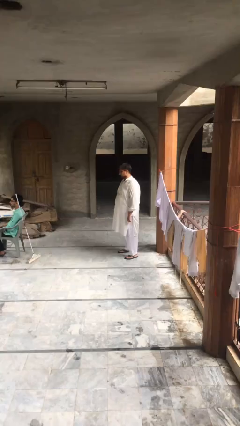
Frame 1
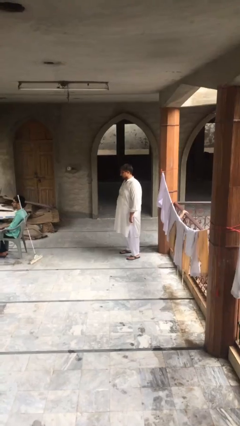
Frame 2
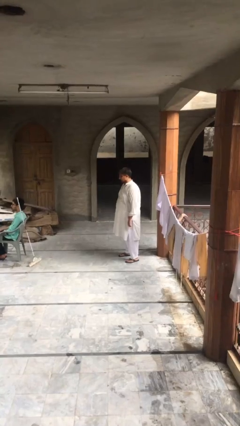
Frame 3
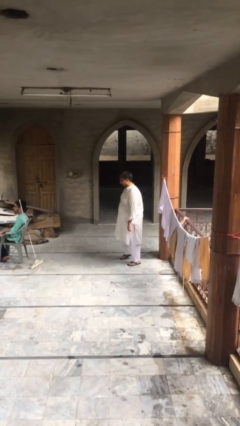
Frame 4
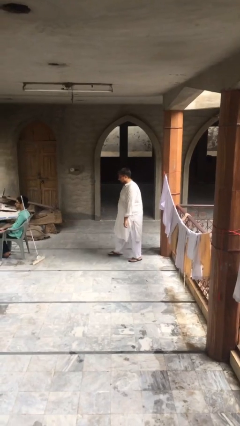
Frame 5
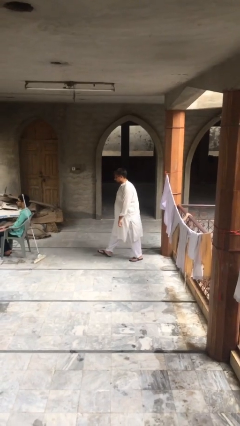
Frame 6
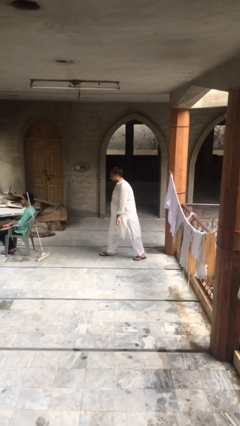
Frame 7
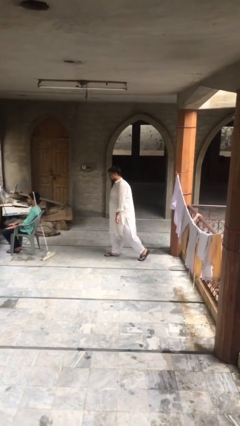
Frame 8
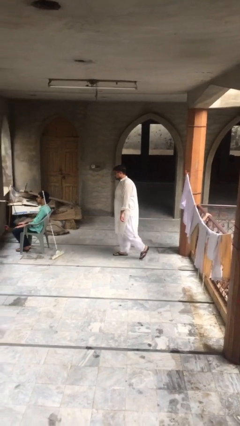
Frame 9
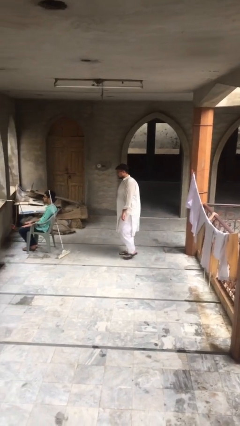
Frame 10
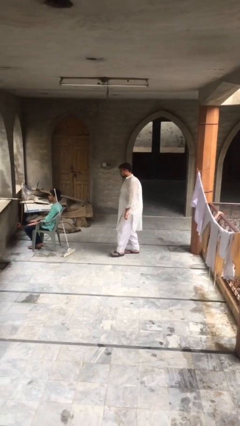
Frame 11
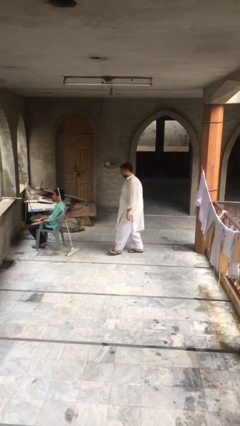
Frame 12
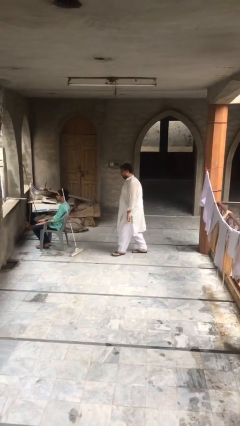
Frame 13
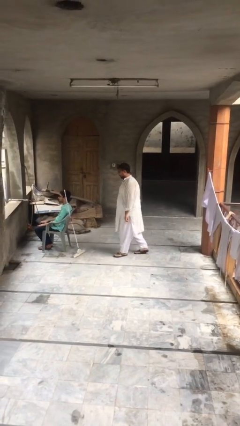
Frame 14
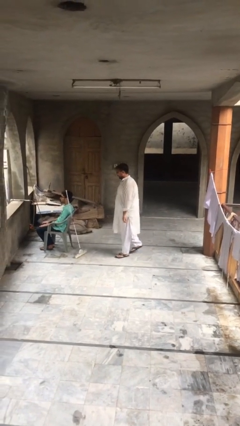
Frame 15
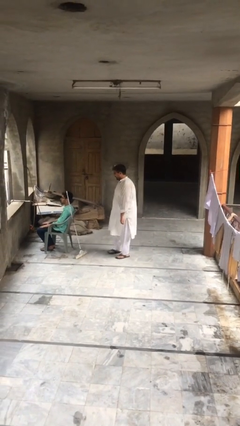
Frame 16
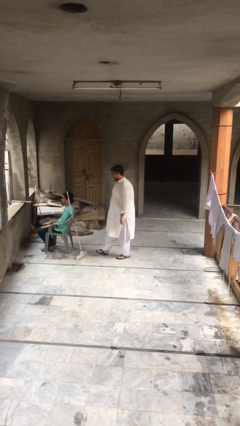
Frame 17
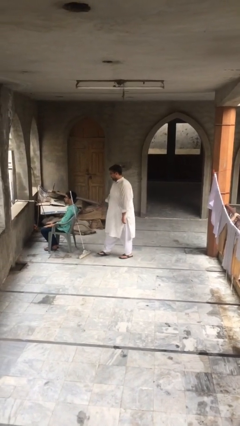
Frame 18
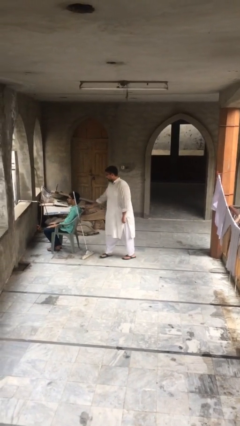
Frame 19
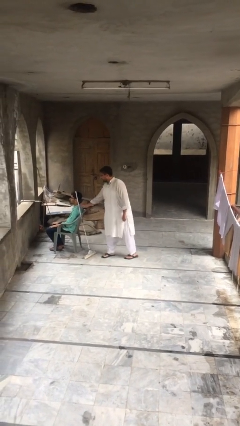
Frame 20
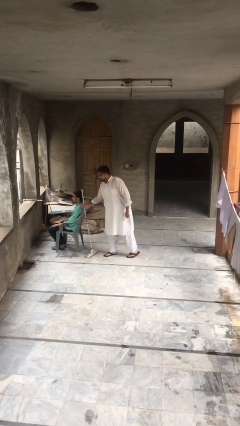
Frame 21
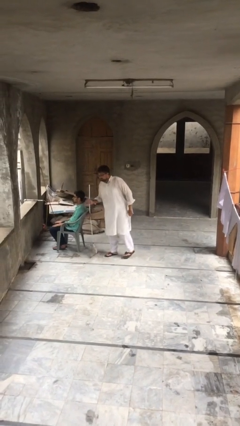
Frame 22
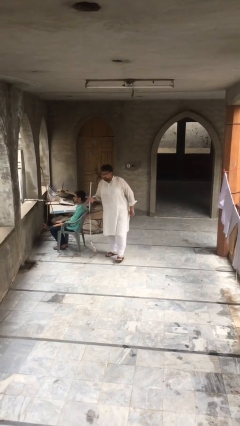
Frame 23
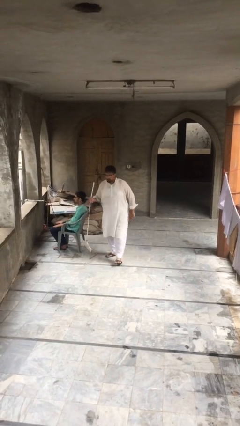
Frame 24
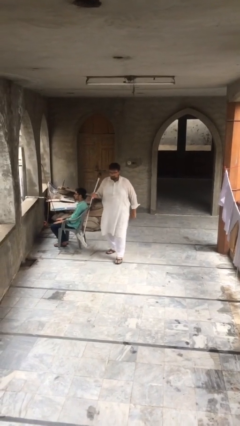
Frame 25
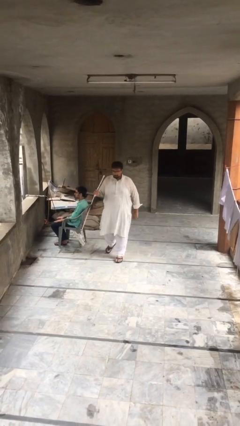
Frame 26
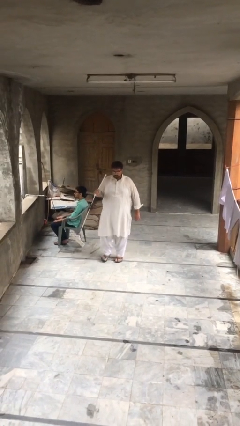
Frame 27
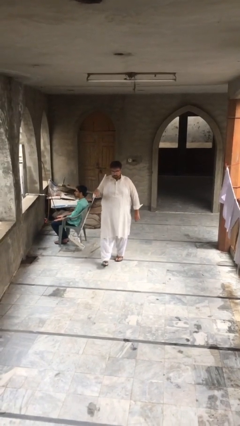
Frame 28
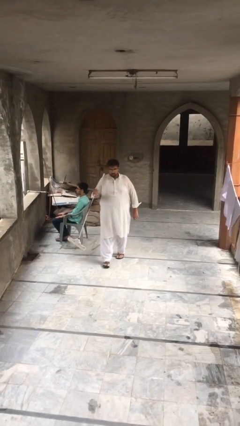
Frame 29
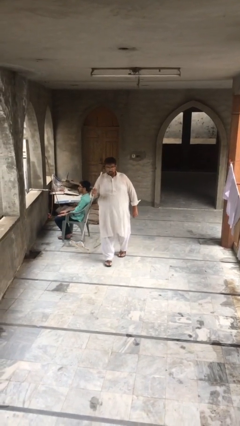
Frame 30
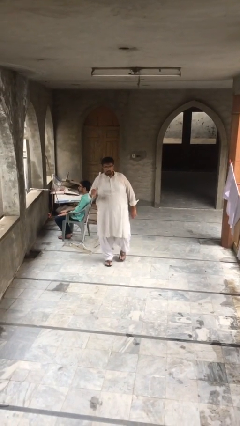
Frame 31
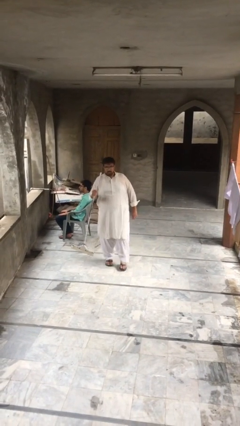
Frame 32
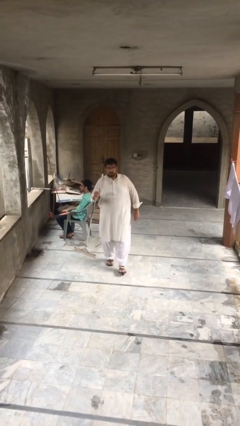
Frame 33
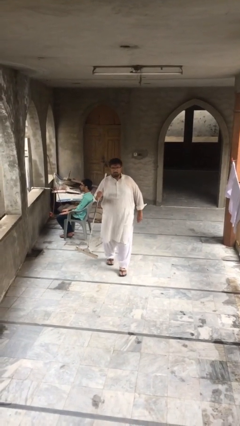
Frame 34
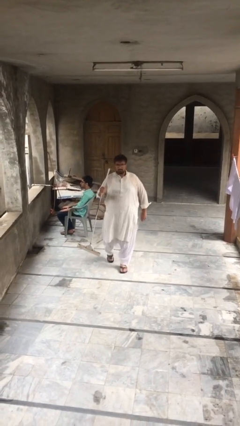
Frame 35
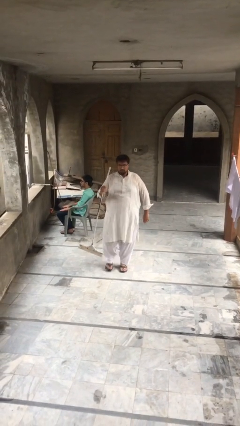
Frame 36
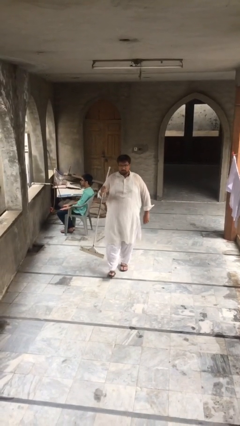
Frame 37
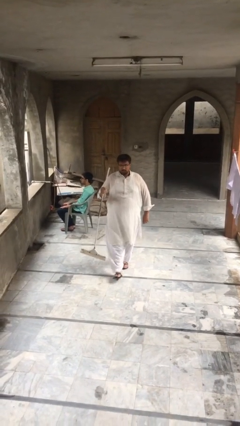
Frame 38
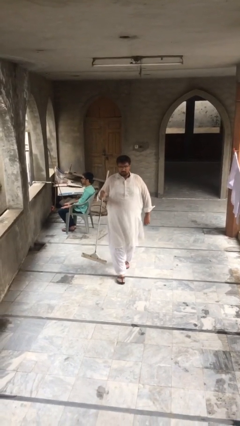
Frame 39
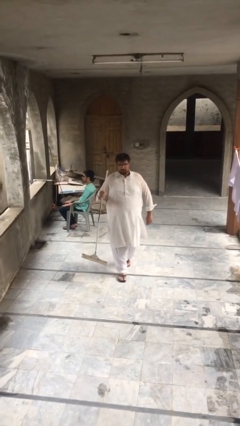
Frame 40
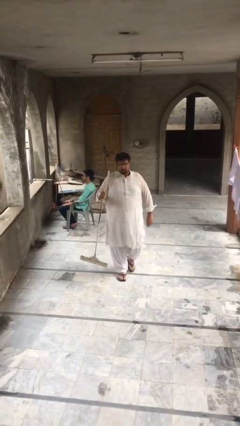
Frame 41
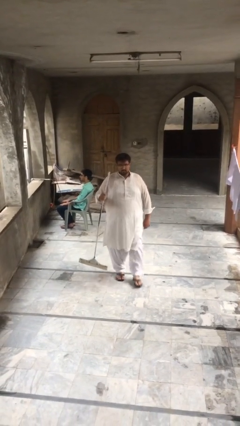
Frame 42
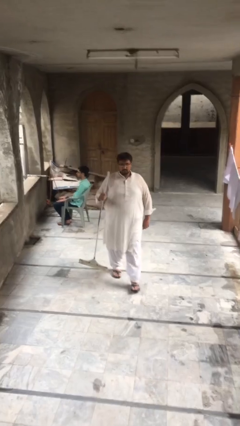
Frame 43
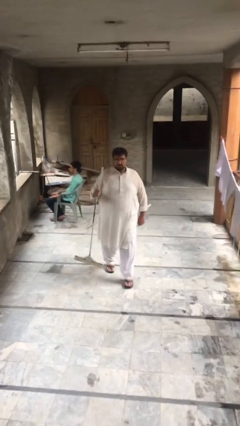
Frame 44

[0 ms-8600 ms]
person steals object from person

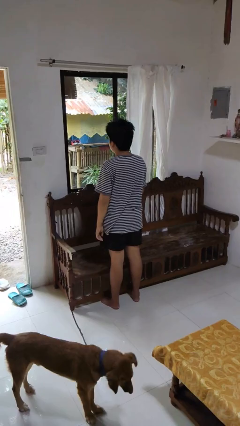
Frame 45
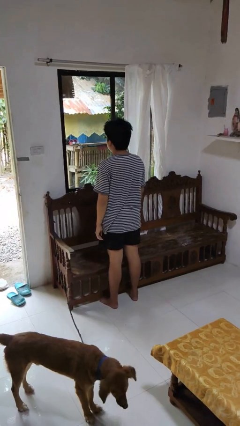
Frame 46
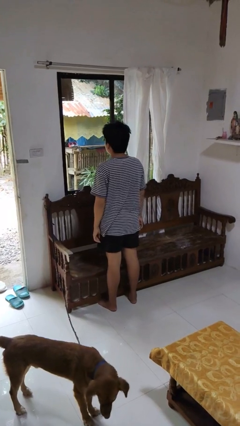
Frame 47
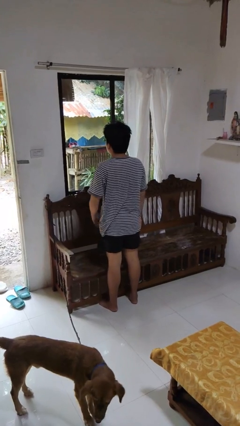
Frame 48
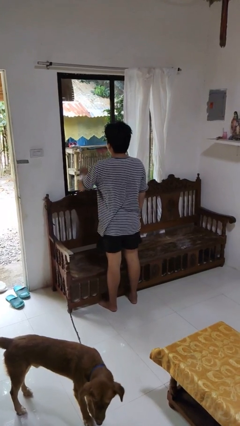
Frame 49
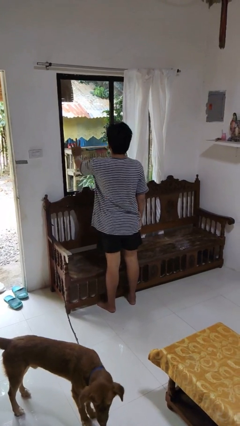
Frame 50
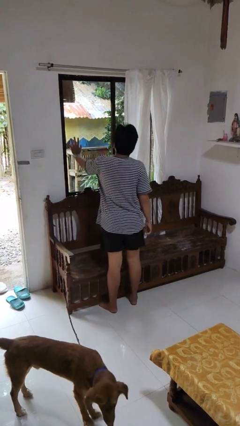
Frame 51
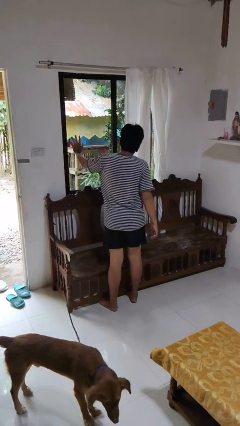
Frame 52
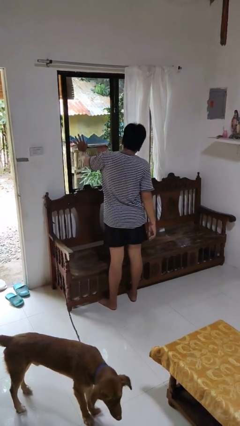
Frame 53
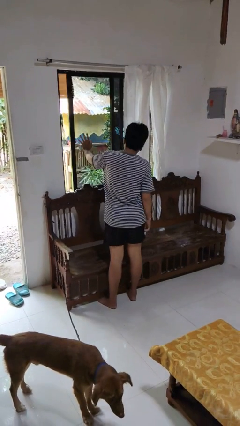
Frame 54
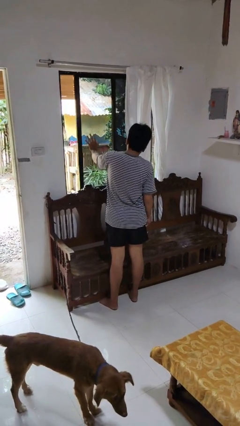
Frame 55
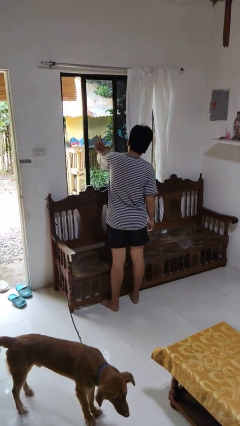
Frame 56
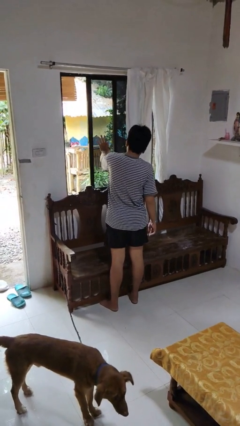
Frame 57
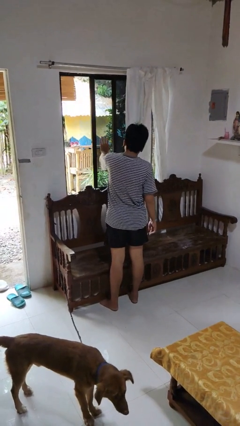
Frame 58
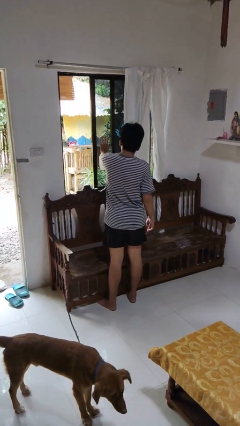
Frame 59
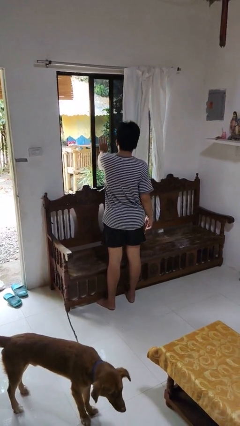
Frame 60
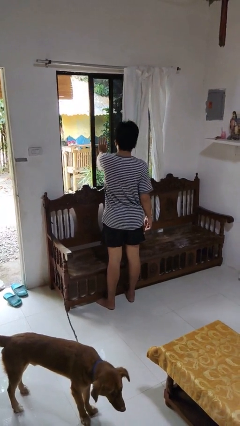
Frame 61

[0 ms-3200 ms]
person opens home window

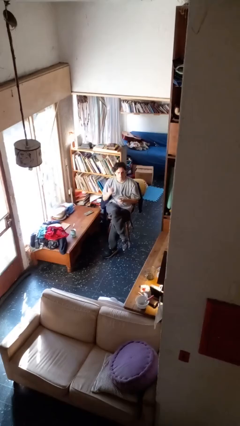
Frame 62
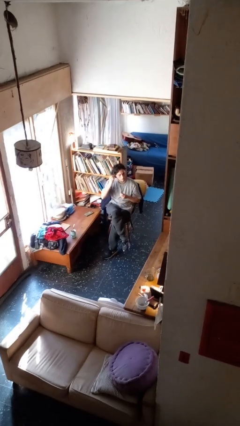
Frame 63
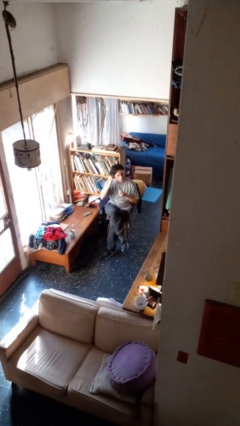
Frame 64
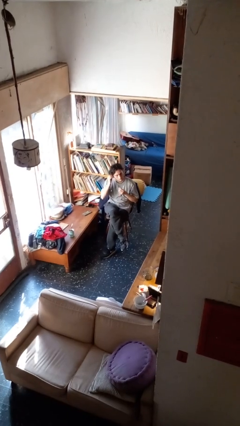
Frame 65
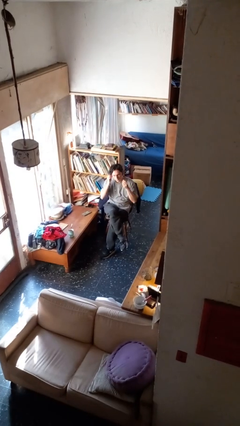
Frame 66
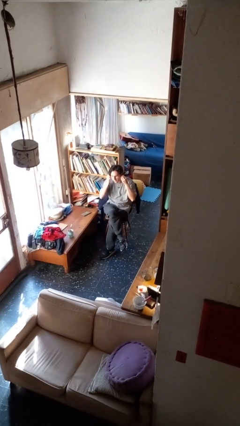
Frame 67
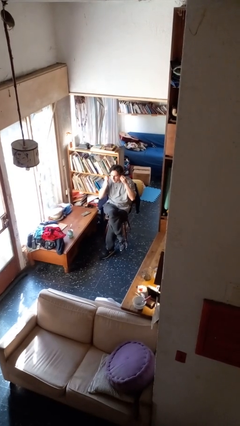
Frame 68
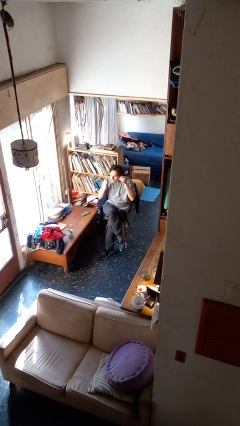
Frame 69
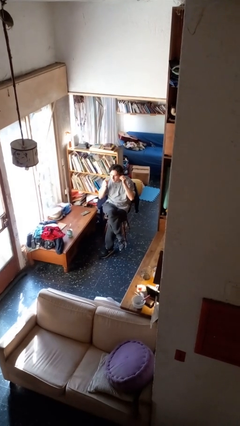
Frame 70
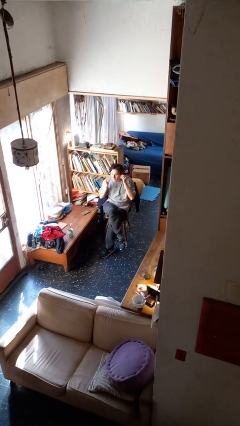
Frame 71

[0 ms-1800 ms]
person puts on headphones

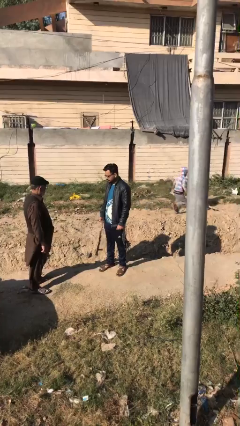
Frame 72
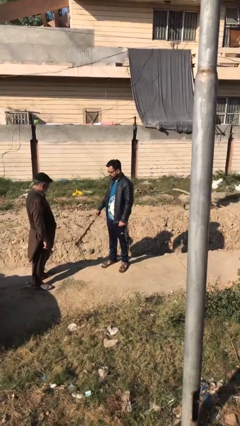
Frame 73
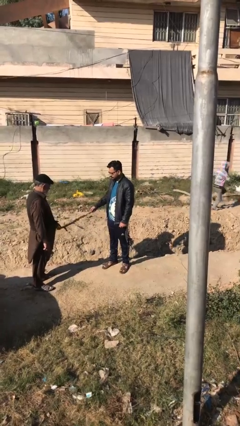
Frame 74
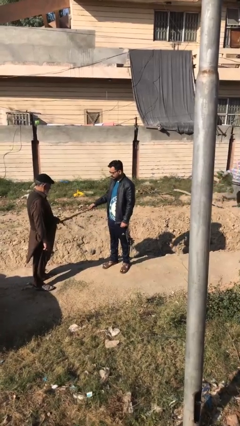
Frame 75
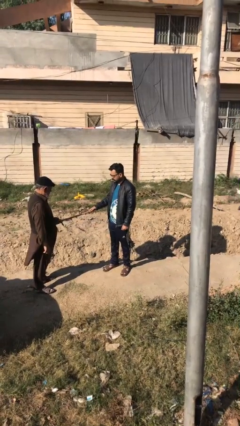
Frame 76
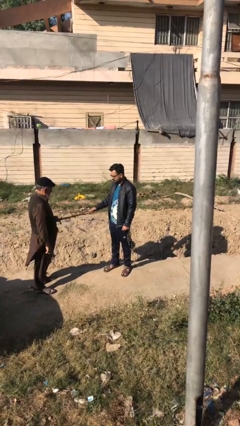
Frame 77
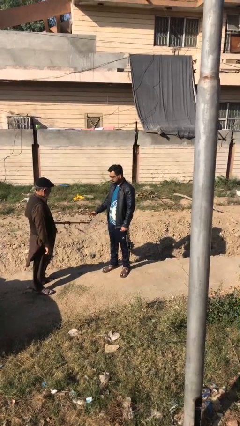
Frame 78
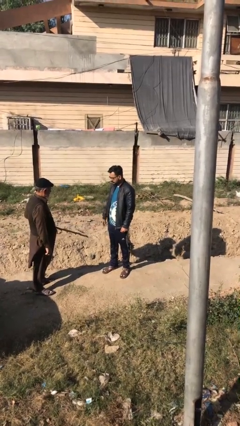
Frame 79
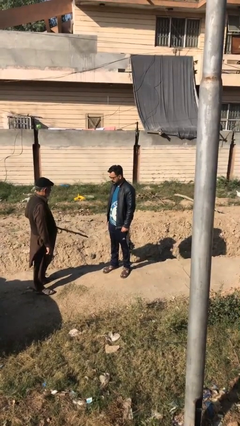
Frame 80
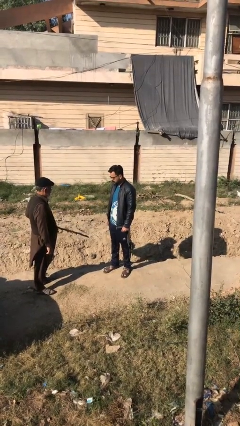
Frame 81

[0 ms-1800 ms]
person transfers object to person

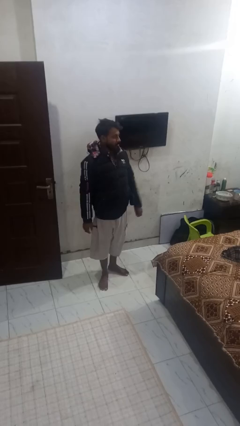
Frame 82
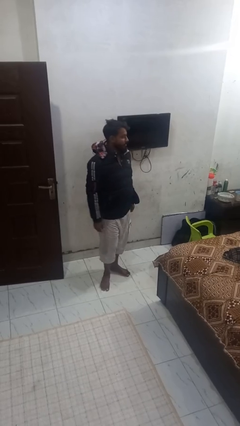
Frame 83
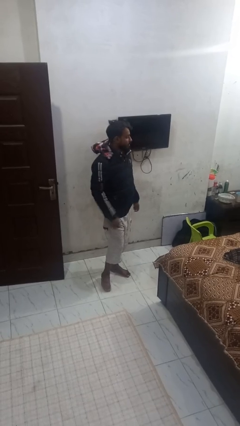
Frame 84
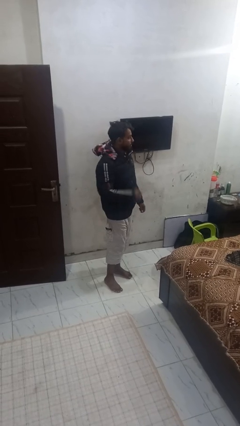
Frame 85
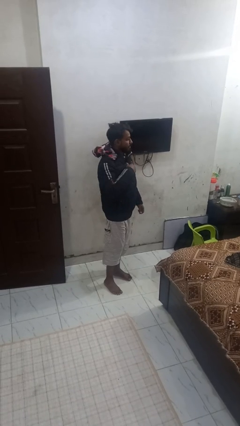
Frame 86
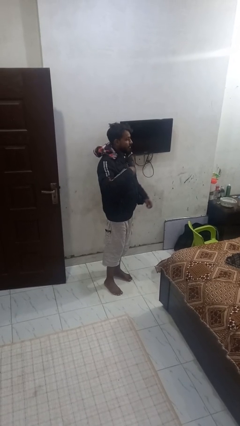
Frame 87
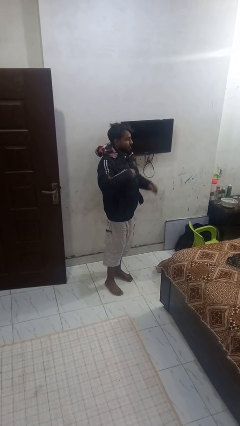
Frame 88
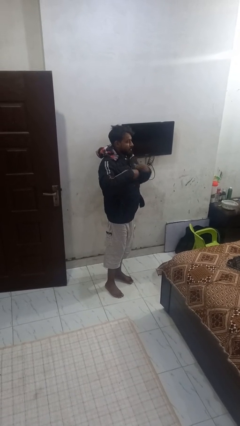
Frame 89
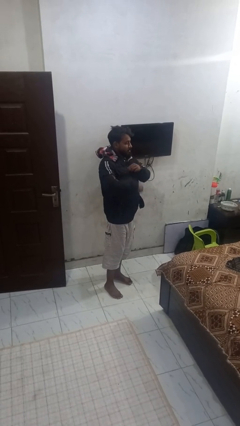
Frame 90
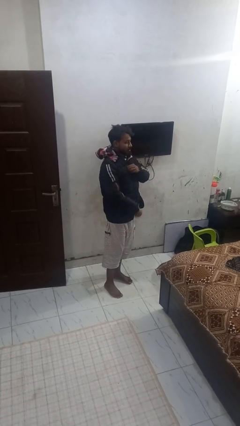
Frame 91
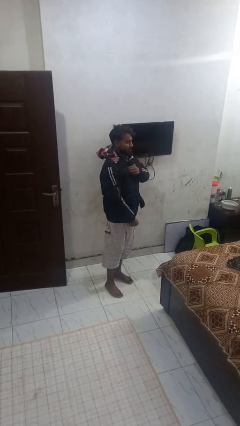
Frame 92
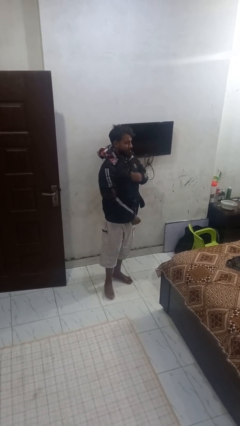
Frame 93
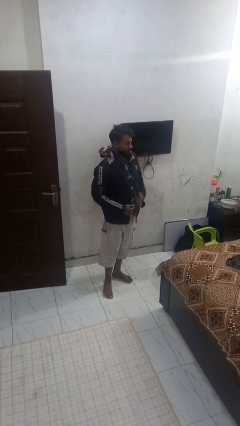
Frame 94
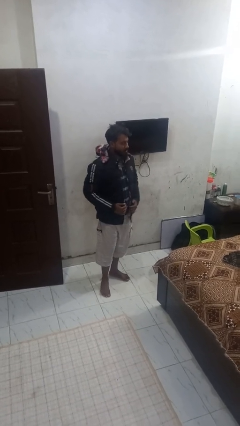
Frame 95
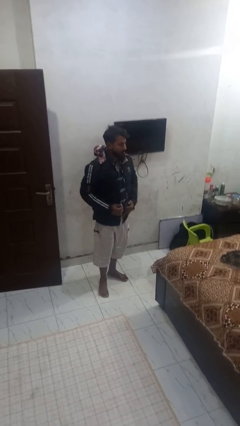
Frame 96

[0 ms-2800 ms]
person unzips jacket
